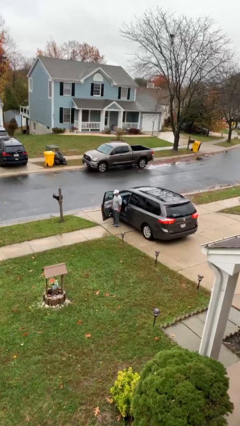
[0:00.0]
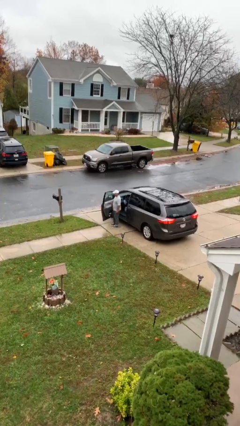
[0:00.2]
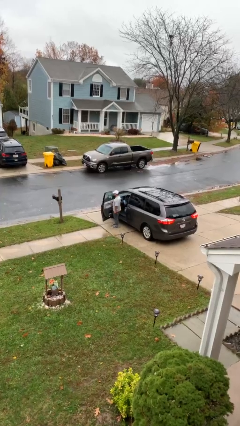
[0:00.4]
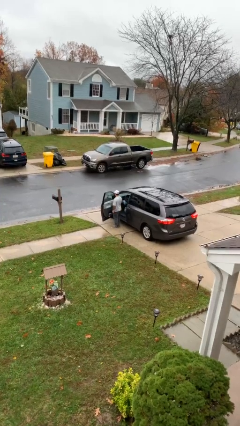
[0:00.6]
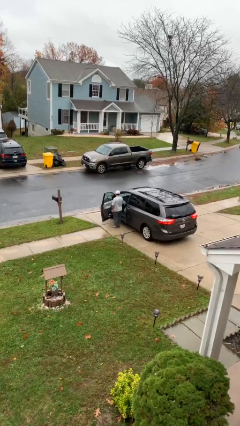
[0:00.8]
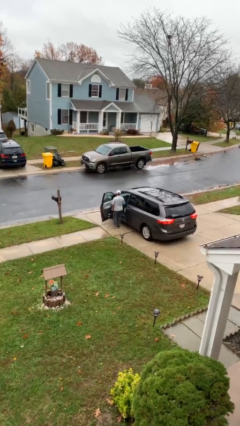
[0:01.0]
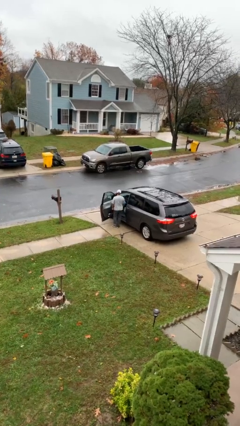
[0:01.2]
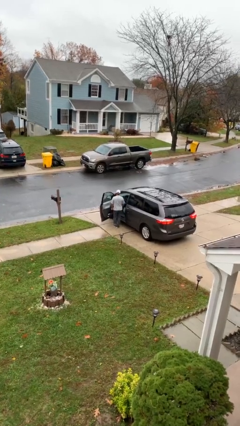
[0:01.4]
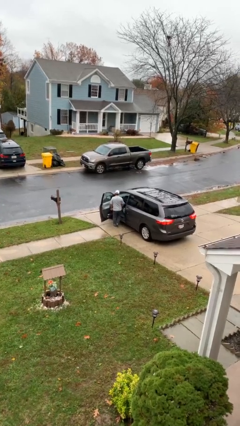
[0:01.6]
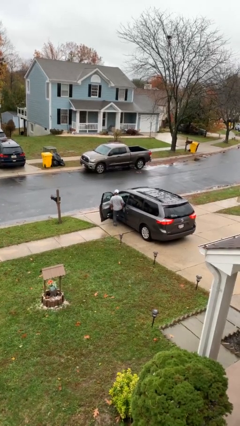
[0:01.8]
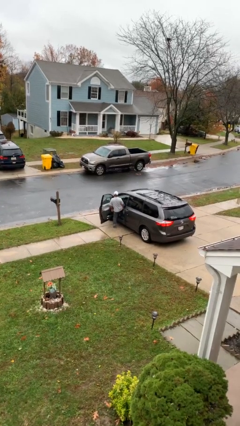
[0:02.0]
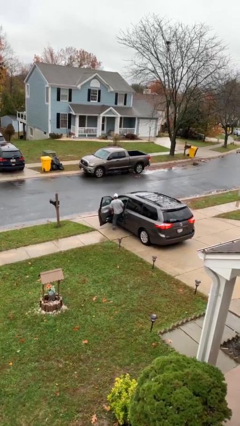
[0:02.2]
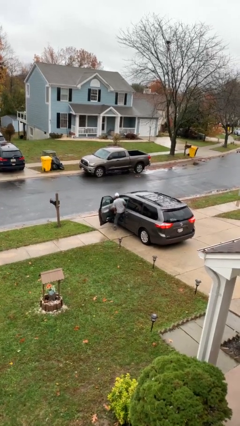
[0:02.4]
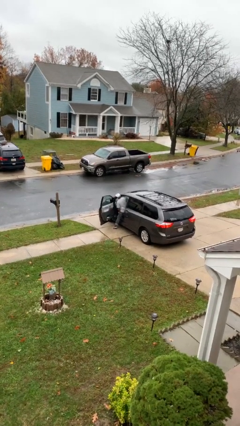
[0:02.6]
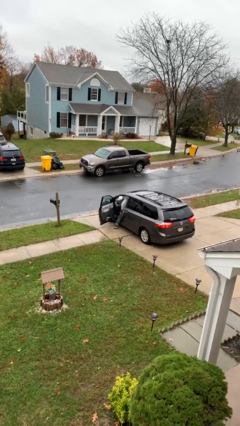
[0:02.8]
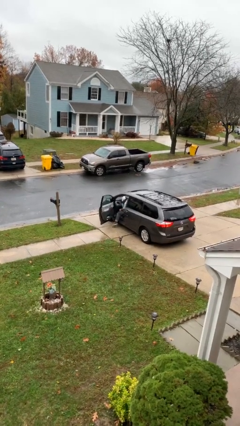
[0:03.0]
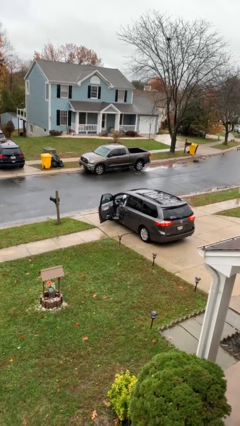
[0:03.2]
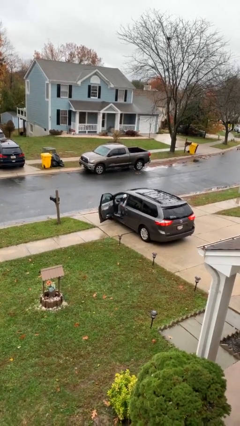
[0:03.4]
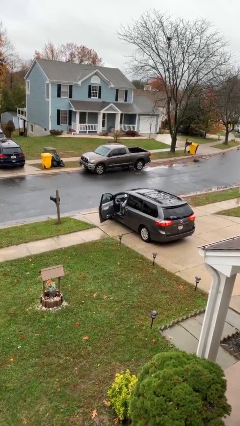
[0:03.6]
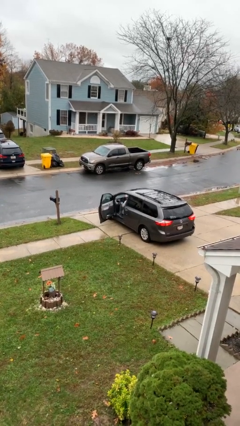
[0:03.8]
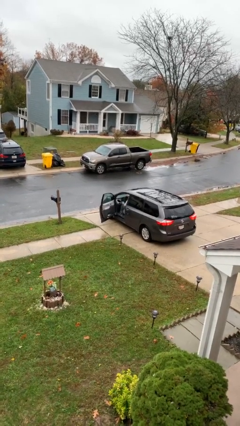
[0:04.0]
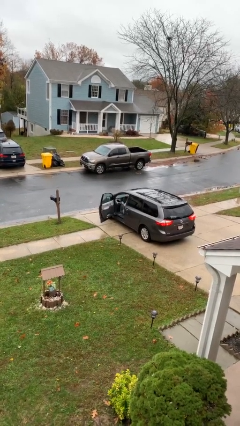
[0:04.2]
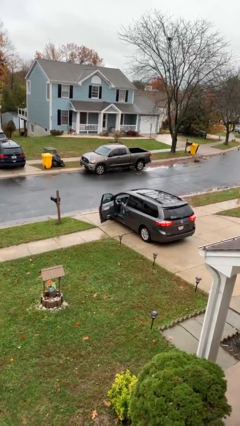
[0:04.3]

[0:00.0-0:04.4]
person enters car

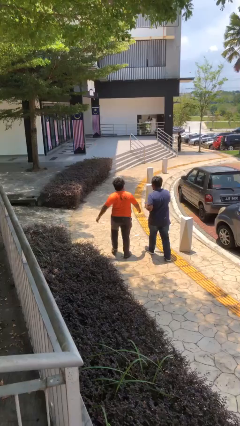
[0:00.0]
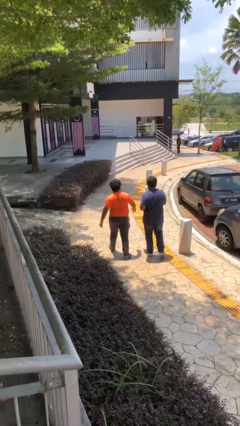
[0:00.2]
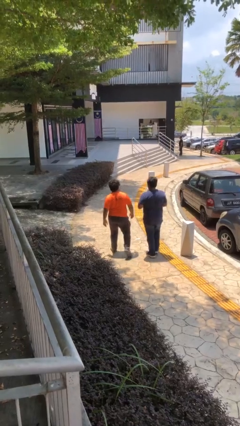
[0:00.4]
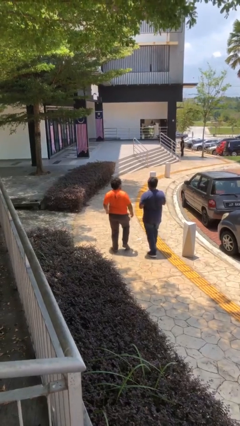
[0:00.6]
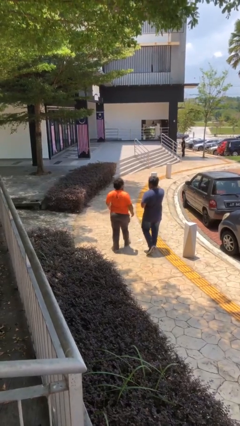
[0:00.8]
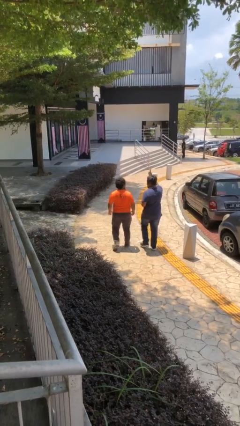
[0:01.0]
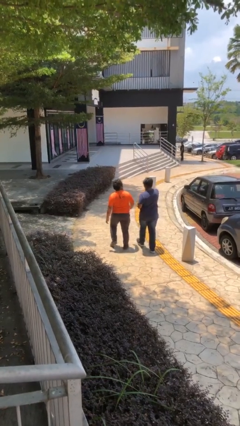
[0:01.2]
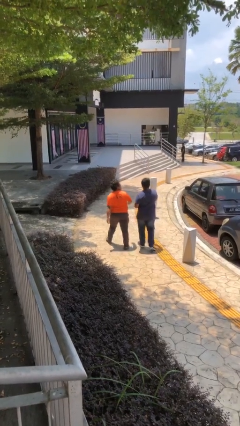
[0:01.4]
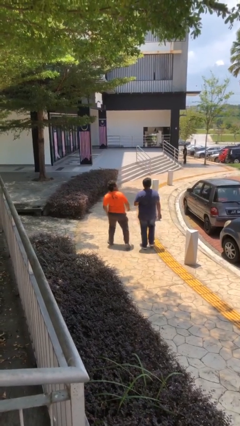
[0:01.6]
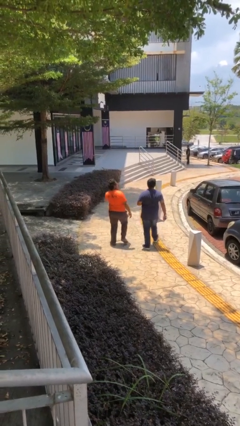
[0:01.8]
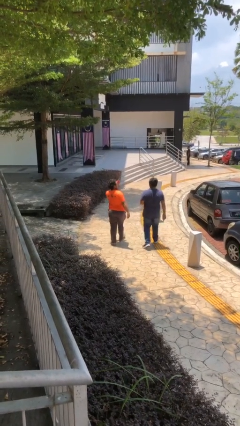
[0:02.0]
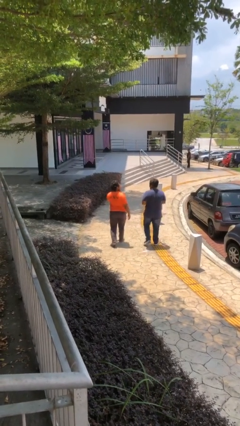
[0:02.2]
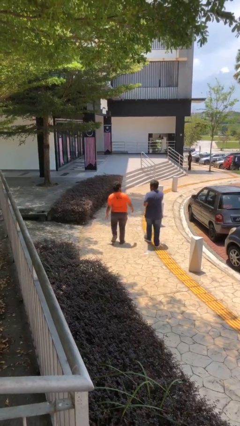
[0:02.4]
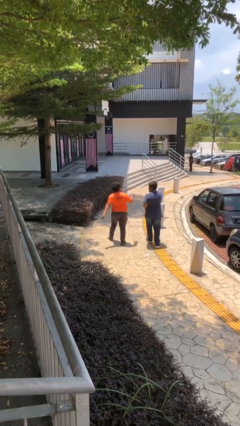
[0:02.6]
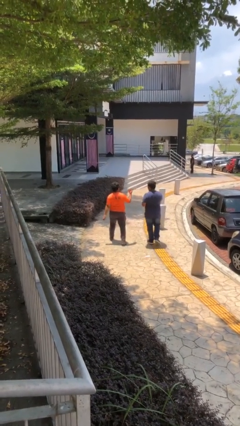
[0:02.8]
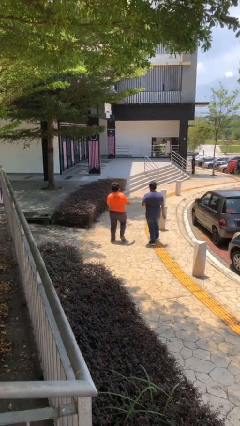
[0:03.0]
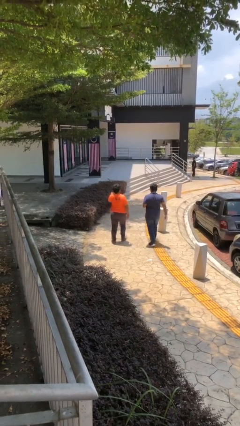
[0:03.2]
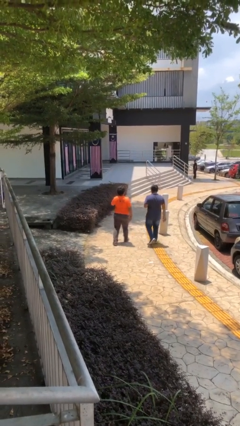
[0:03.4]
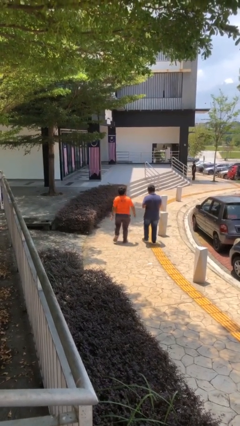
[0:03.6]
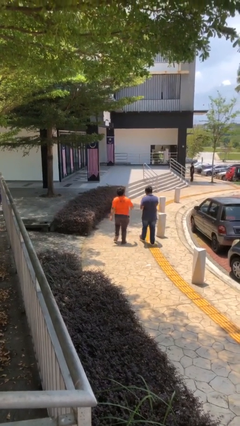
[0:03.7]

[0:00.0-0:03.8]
person talks to person

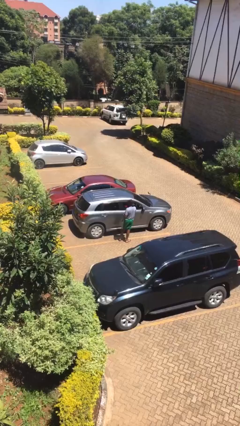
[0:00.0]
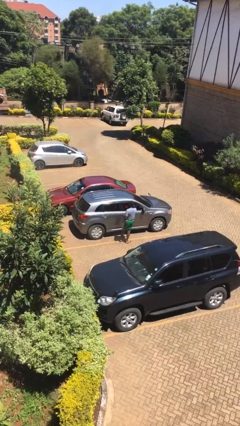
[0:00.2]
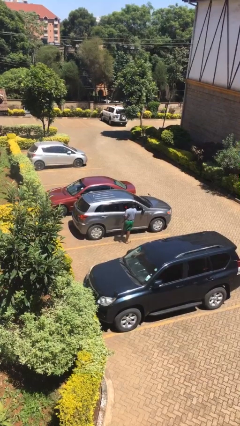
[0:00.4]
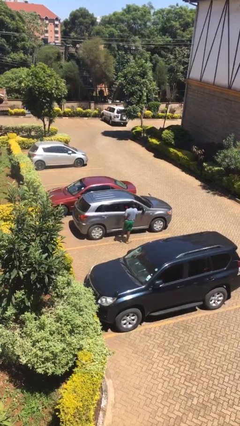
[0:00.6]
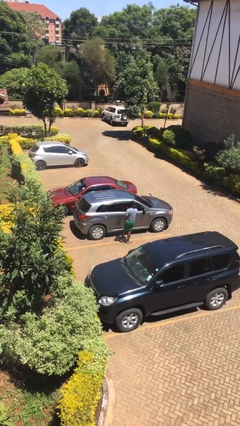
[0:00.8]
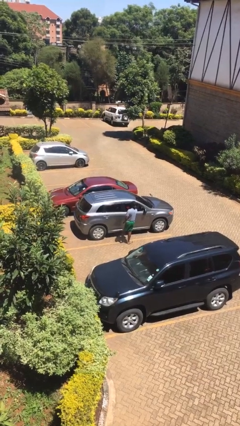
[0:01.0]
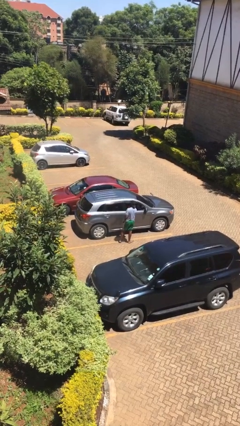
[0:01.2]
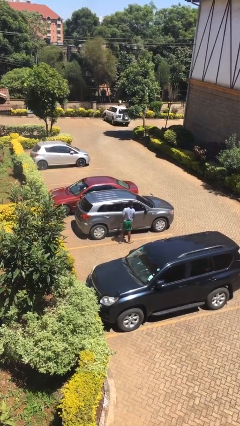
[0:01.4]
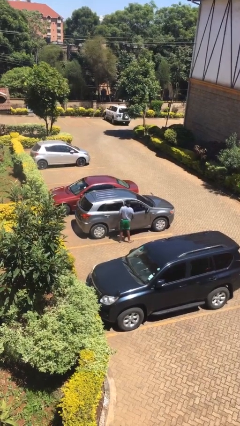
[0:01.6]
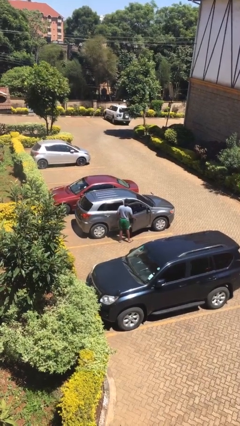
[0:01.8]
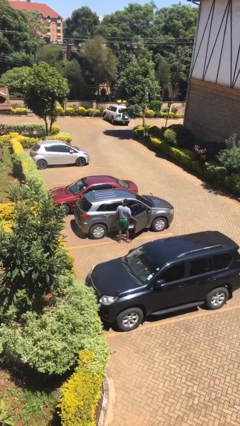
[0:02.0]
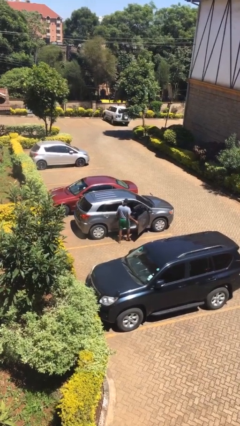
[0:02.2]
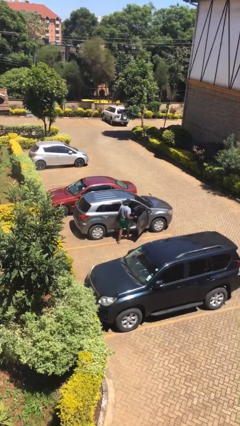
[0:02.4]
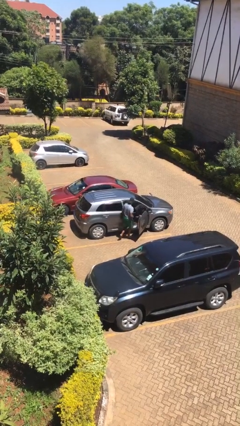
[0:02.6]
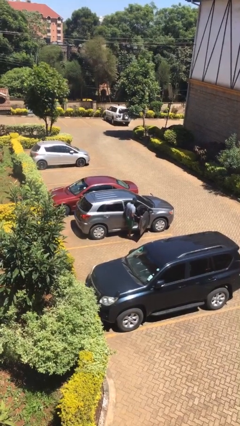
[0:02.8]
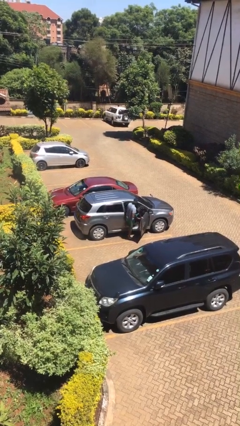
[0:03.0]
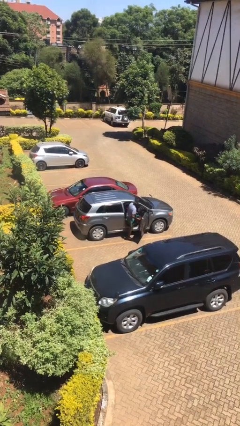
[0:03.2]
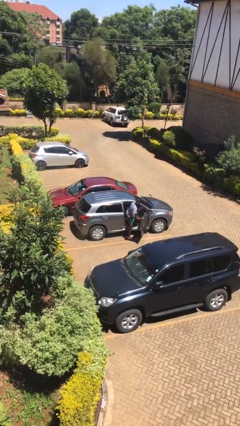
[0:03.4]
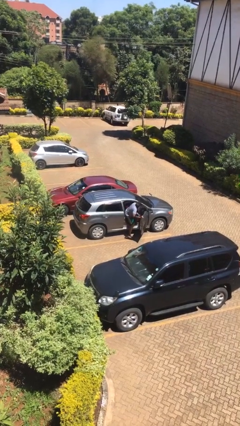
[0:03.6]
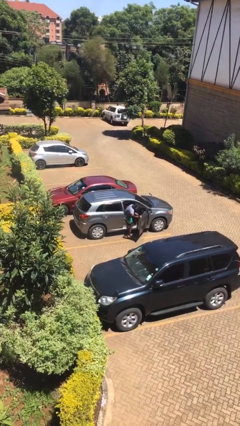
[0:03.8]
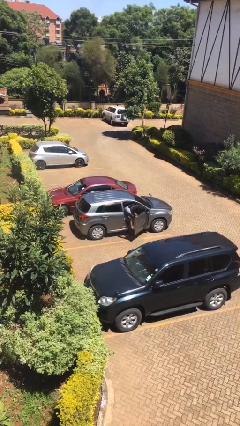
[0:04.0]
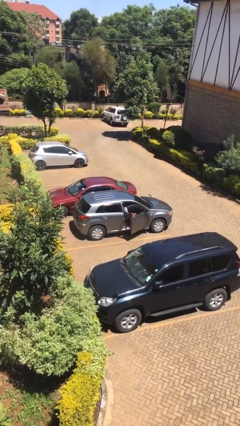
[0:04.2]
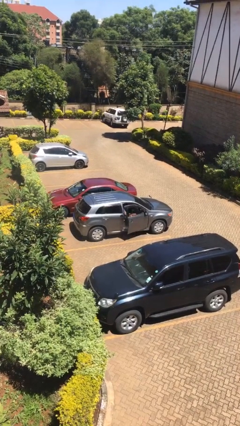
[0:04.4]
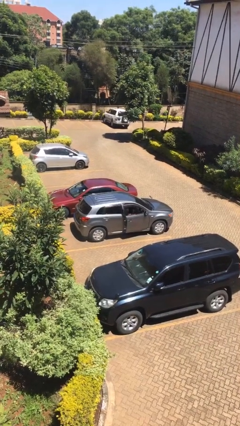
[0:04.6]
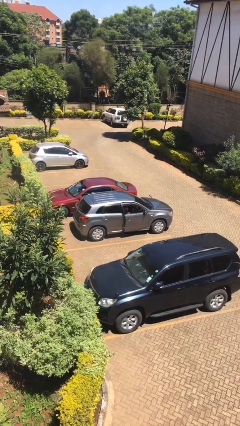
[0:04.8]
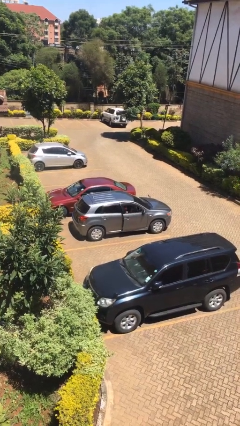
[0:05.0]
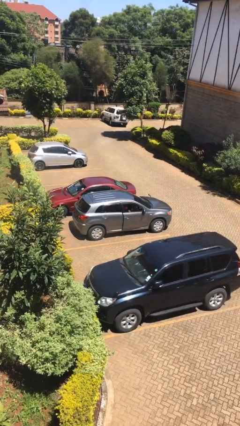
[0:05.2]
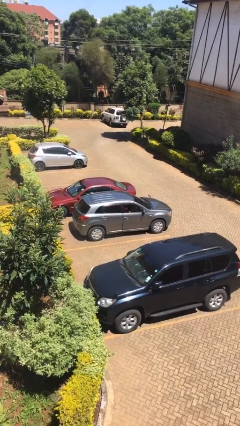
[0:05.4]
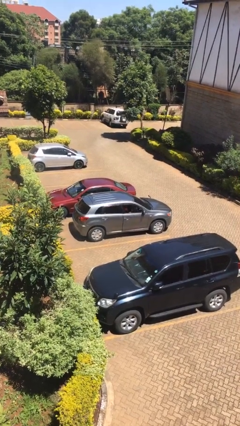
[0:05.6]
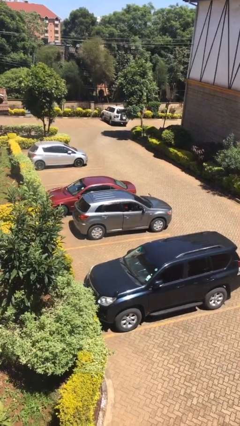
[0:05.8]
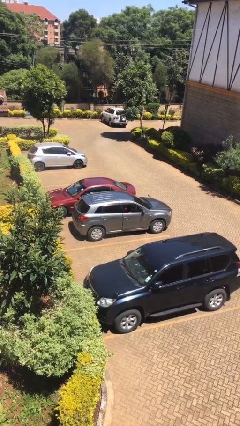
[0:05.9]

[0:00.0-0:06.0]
car picks up person

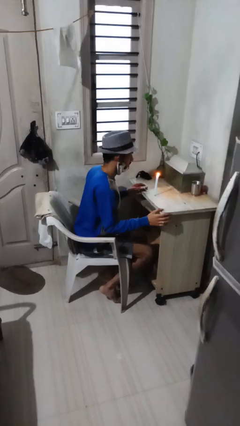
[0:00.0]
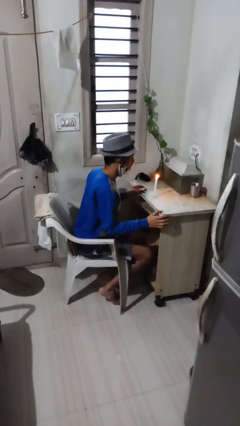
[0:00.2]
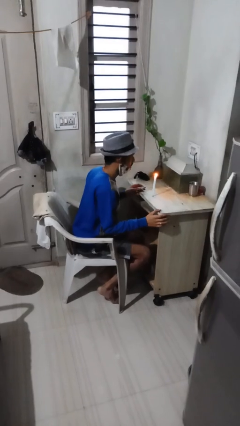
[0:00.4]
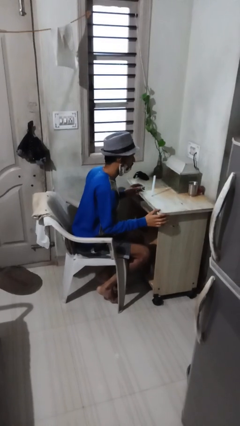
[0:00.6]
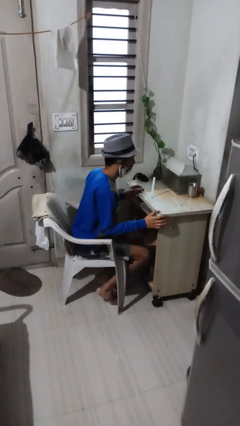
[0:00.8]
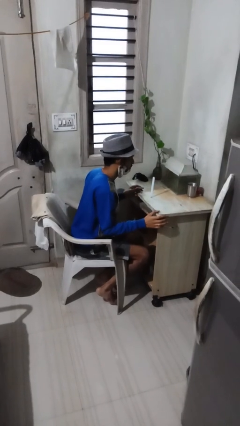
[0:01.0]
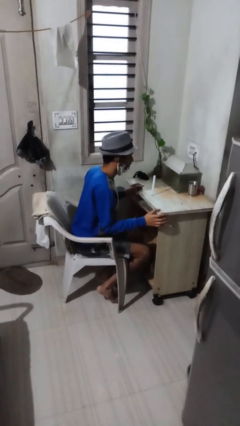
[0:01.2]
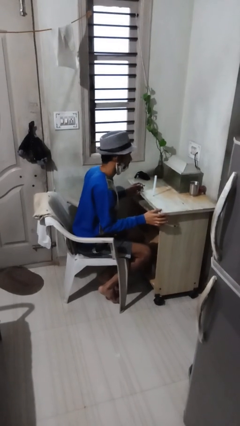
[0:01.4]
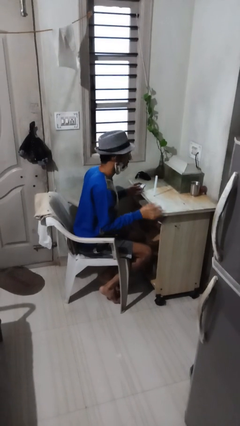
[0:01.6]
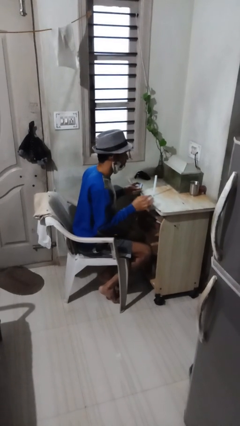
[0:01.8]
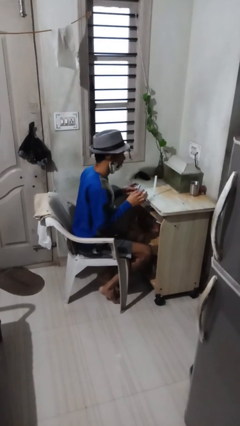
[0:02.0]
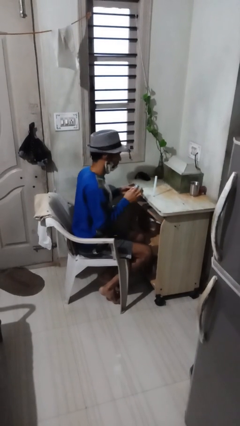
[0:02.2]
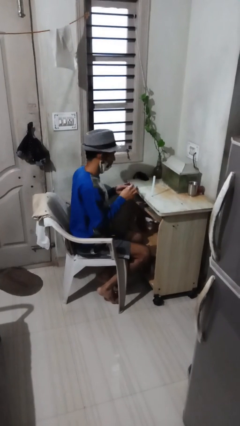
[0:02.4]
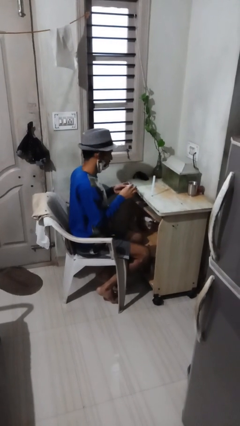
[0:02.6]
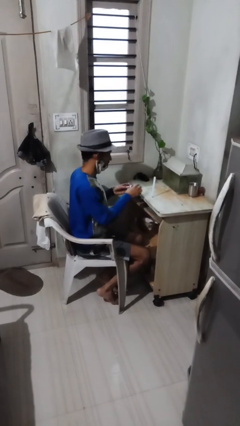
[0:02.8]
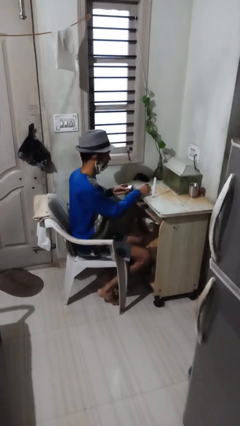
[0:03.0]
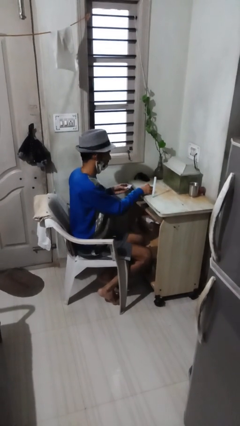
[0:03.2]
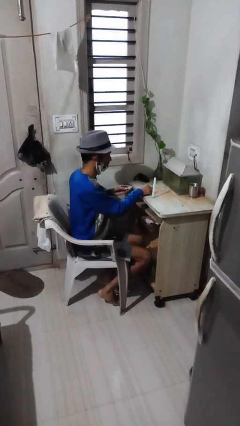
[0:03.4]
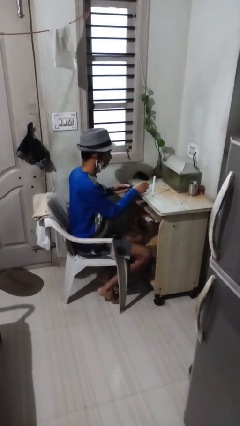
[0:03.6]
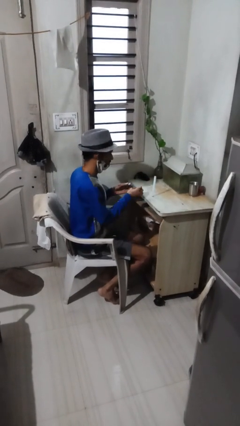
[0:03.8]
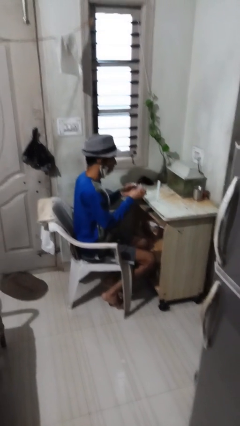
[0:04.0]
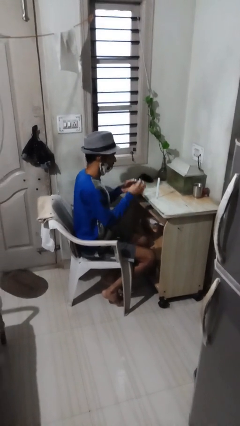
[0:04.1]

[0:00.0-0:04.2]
person extinguishes candle
